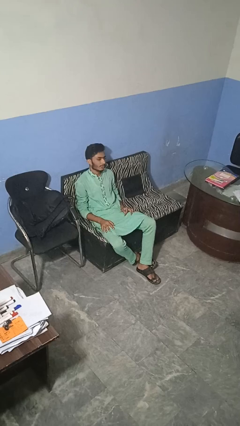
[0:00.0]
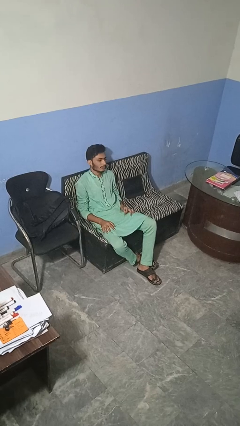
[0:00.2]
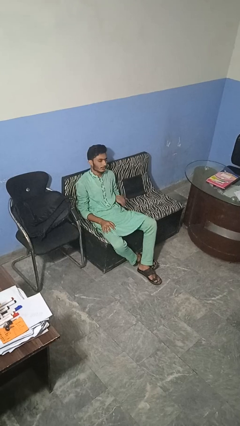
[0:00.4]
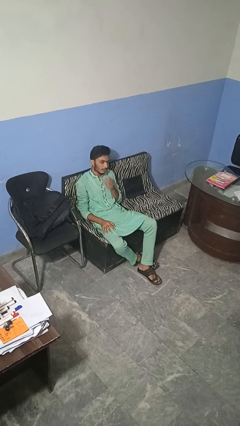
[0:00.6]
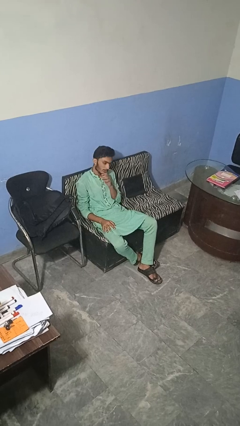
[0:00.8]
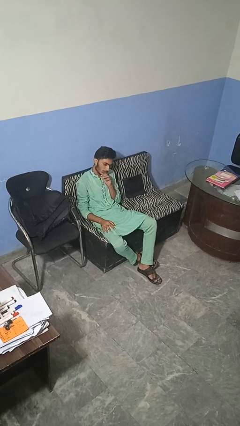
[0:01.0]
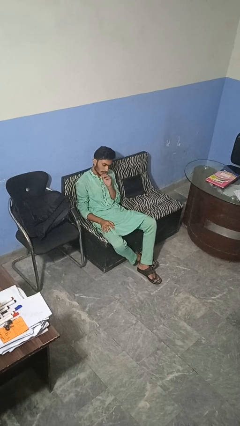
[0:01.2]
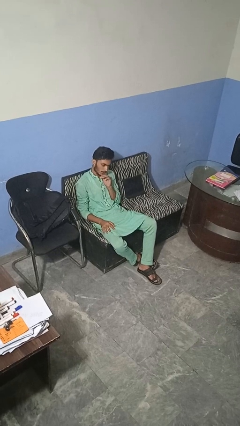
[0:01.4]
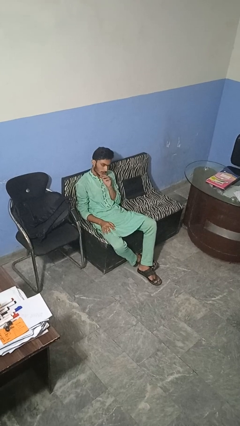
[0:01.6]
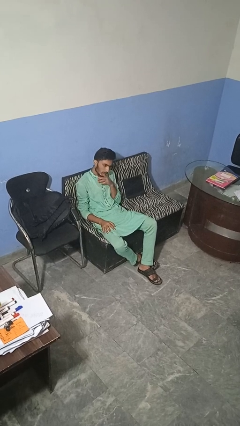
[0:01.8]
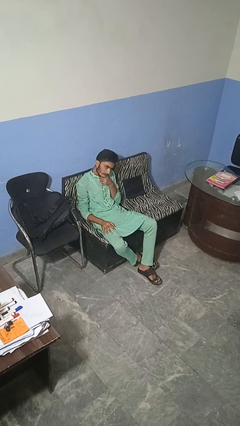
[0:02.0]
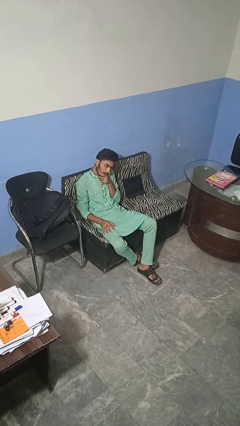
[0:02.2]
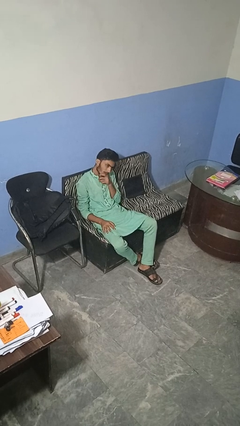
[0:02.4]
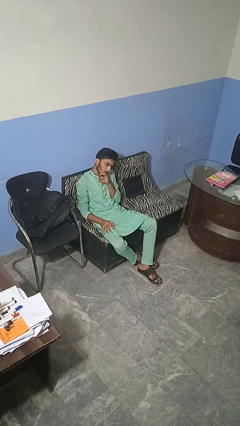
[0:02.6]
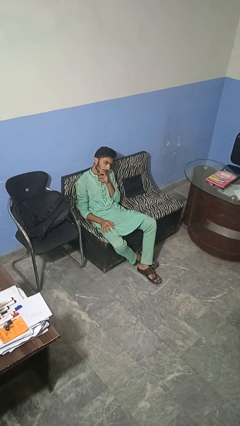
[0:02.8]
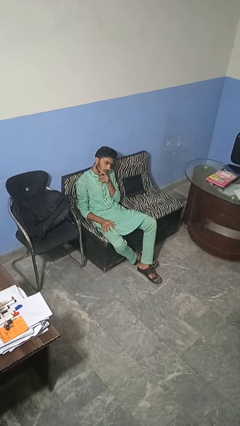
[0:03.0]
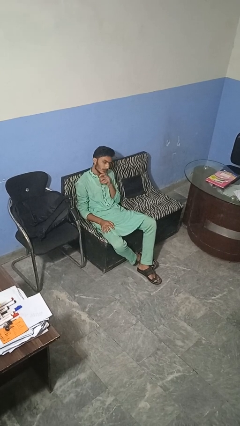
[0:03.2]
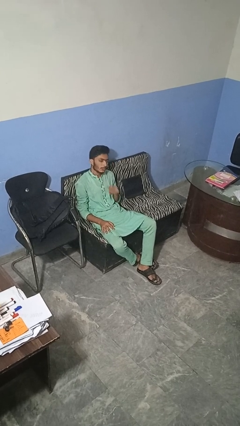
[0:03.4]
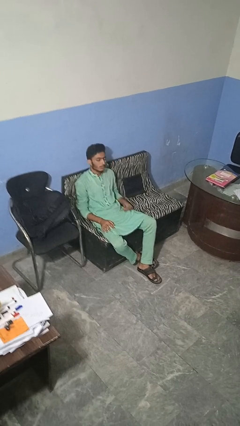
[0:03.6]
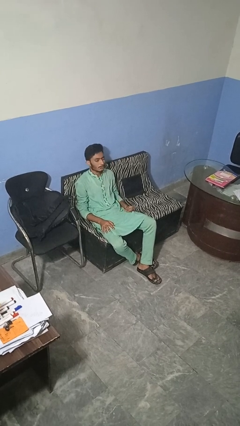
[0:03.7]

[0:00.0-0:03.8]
person strokes chin

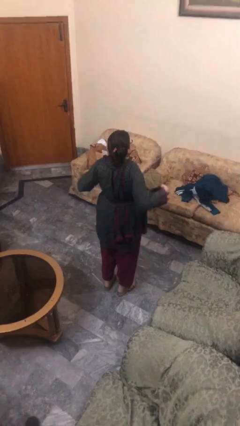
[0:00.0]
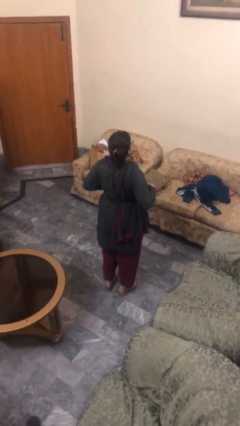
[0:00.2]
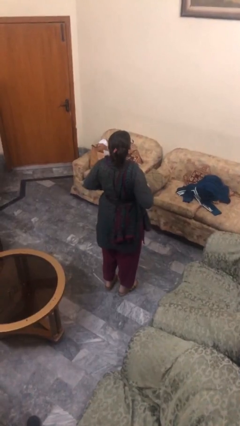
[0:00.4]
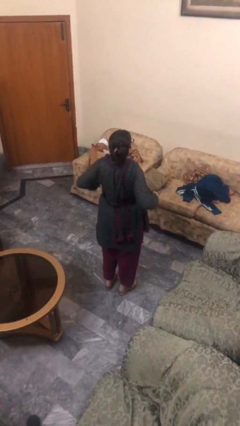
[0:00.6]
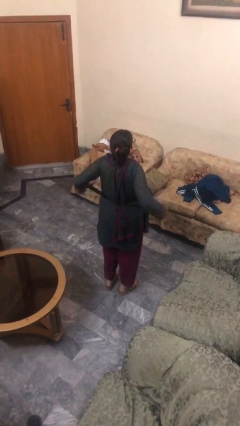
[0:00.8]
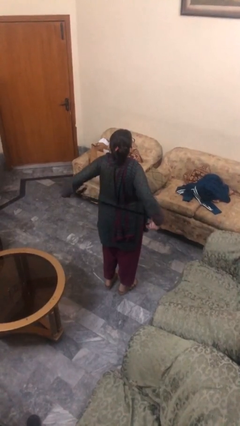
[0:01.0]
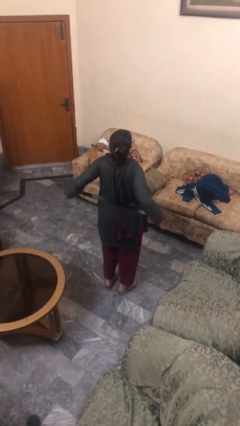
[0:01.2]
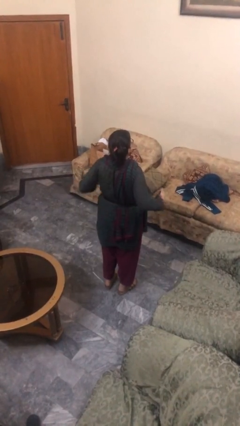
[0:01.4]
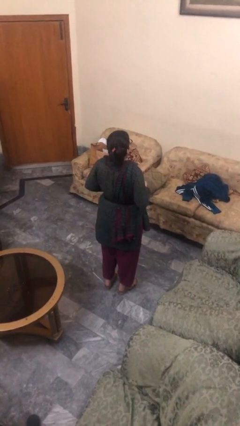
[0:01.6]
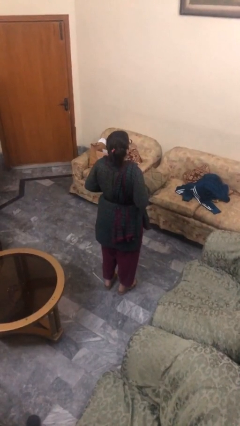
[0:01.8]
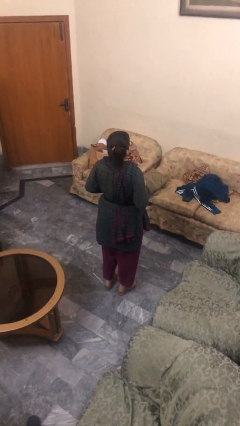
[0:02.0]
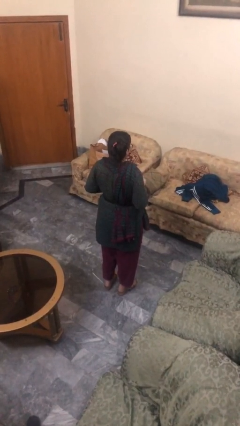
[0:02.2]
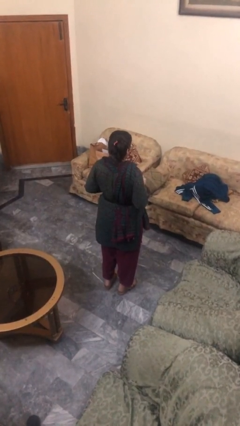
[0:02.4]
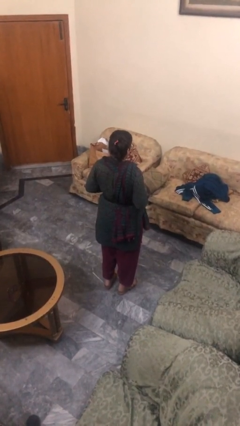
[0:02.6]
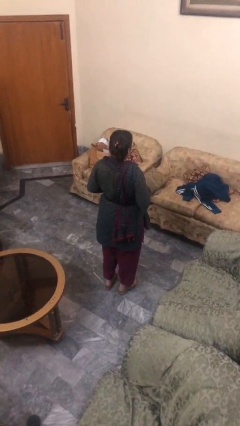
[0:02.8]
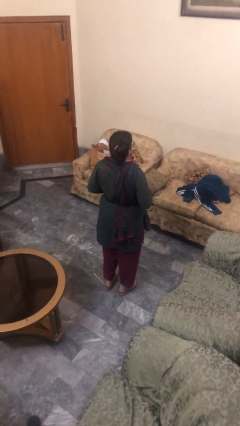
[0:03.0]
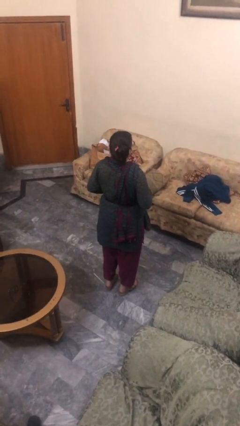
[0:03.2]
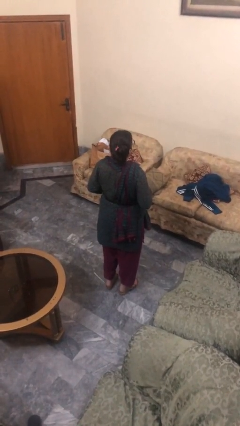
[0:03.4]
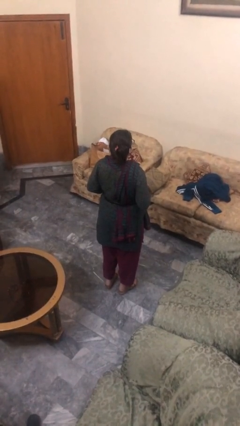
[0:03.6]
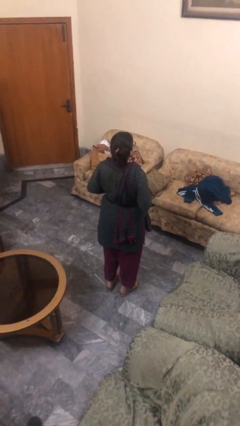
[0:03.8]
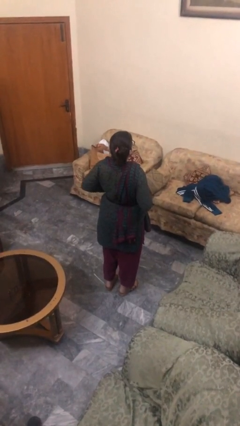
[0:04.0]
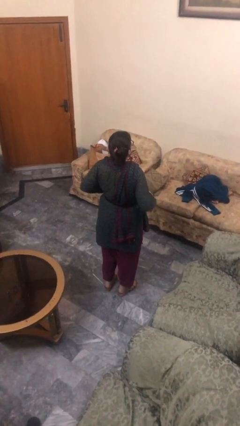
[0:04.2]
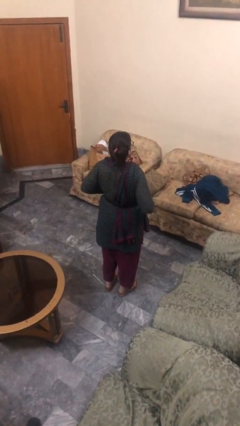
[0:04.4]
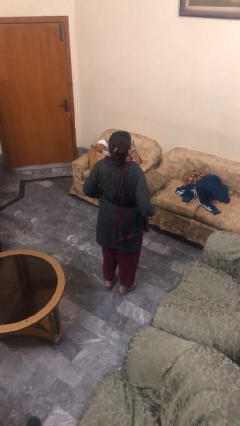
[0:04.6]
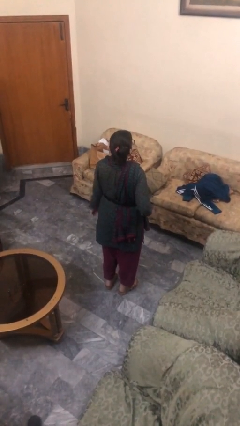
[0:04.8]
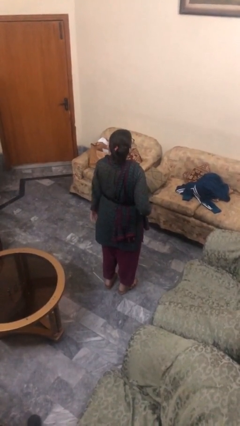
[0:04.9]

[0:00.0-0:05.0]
person puts on belt

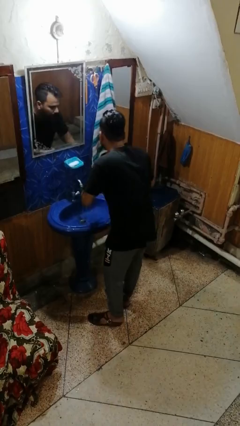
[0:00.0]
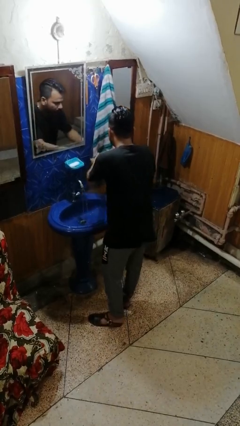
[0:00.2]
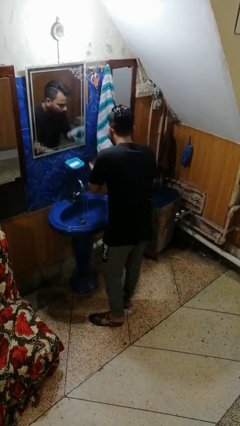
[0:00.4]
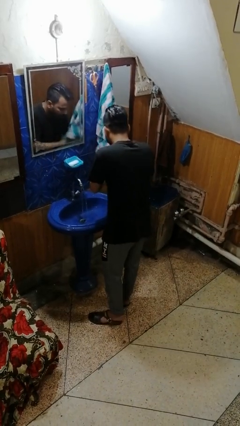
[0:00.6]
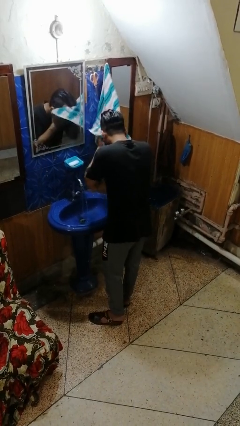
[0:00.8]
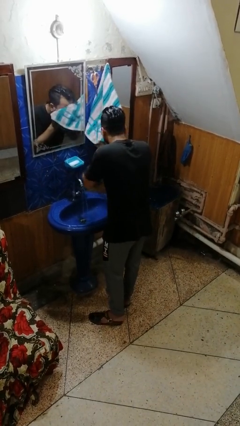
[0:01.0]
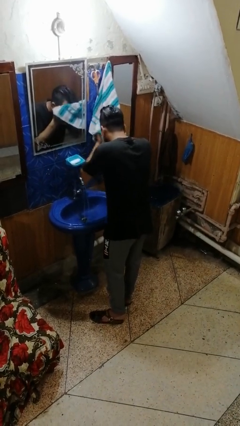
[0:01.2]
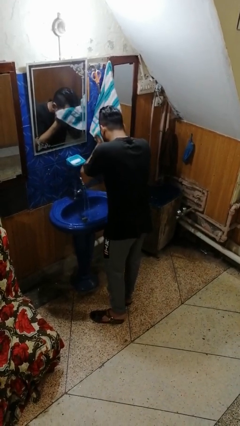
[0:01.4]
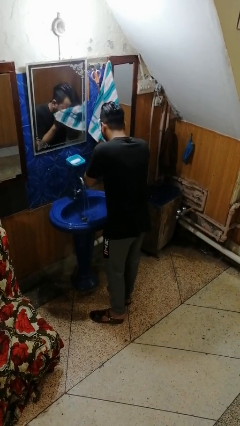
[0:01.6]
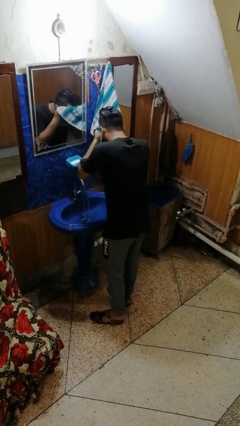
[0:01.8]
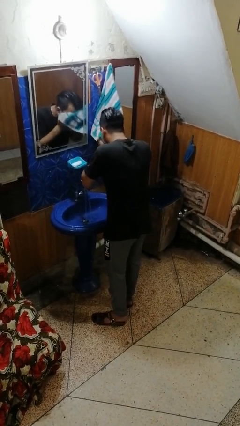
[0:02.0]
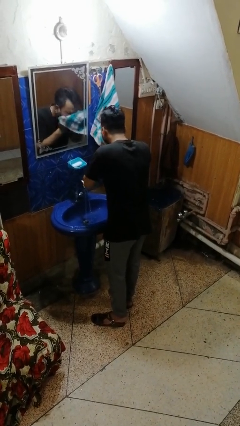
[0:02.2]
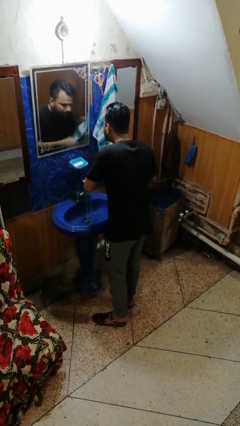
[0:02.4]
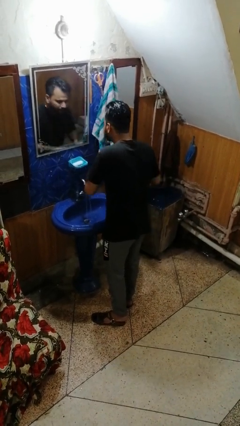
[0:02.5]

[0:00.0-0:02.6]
person dries face with towel

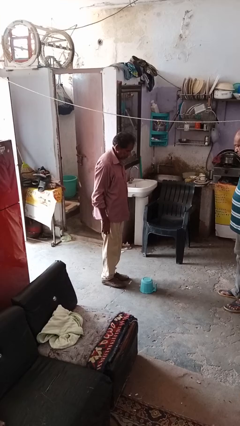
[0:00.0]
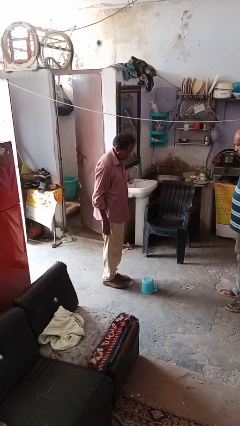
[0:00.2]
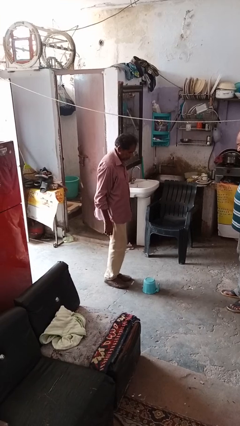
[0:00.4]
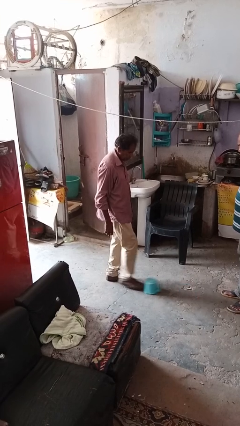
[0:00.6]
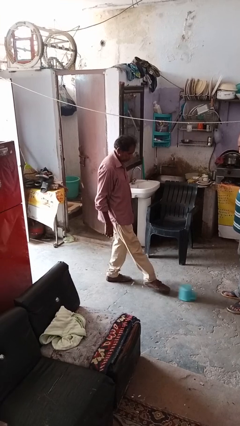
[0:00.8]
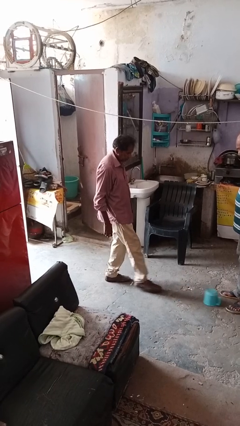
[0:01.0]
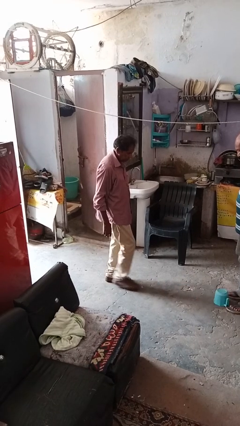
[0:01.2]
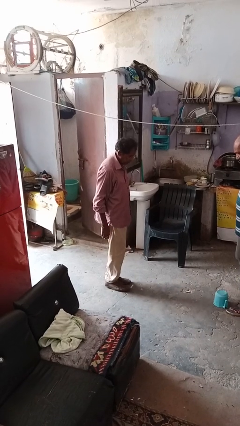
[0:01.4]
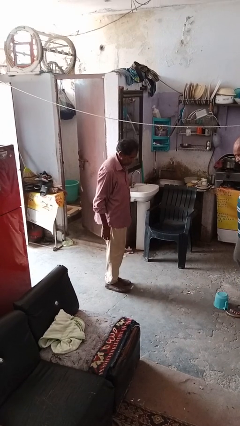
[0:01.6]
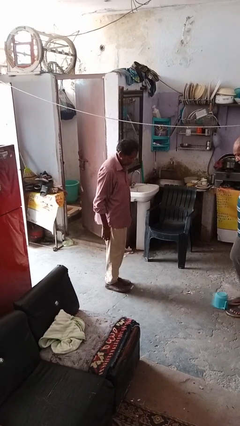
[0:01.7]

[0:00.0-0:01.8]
person kicks object to person

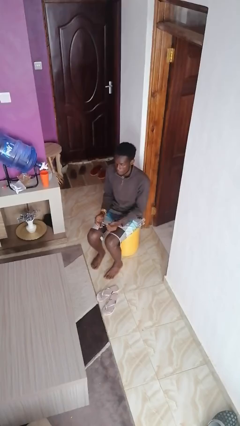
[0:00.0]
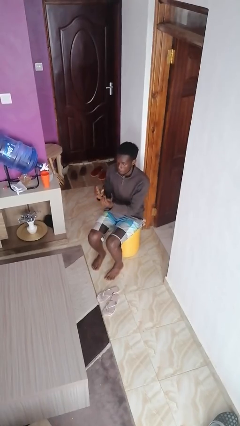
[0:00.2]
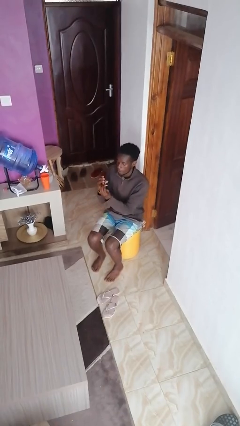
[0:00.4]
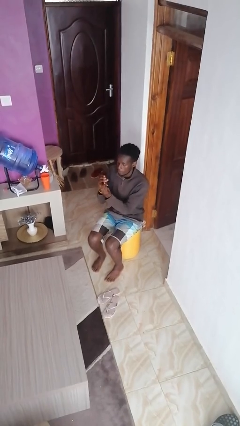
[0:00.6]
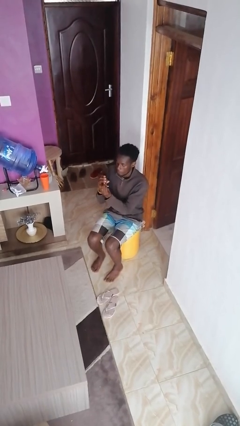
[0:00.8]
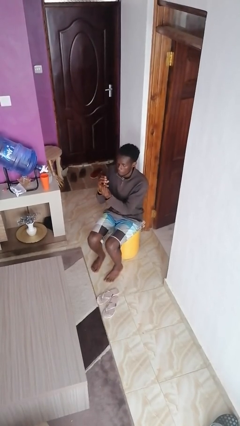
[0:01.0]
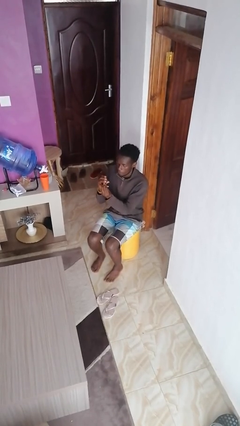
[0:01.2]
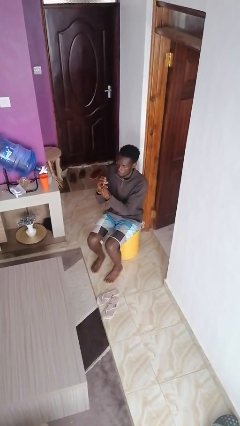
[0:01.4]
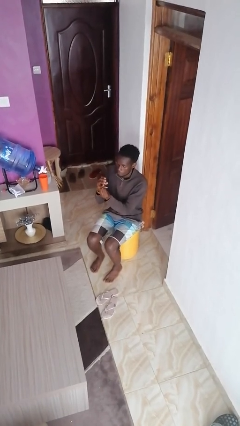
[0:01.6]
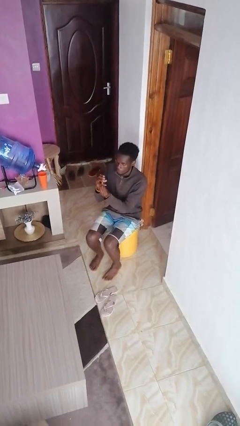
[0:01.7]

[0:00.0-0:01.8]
person clips fingernails

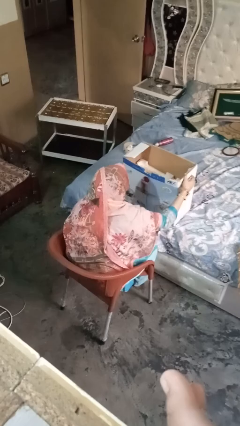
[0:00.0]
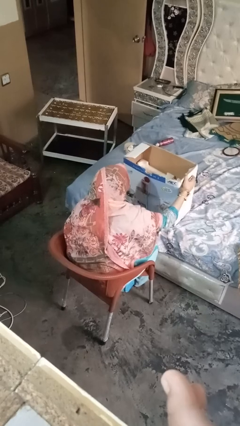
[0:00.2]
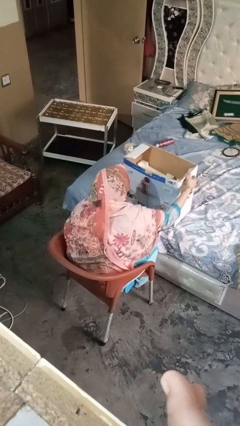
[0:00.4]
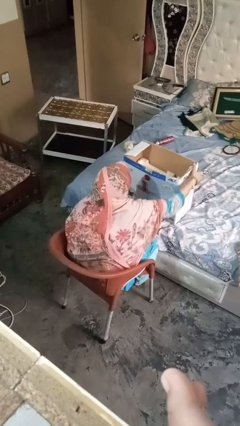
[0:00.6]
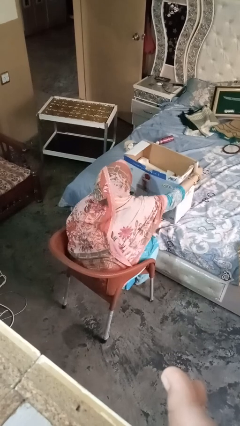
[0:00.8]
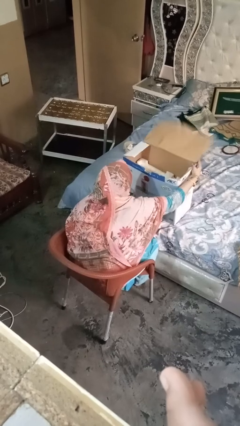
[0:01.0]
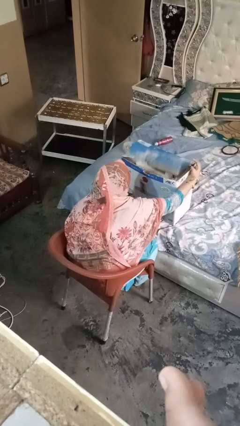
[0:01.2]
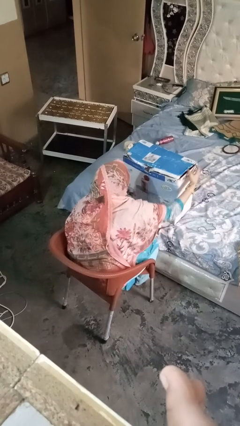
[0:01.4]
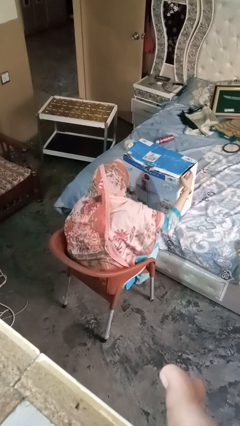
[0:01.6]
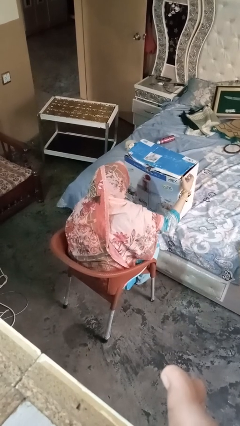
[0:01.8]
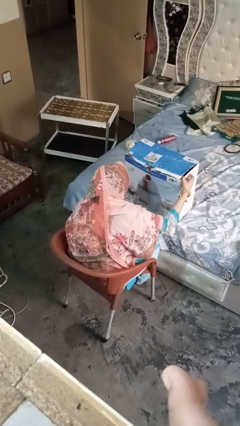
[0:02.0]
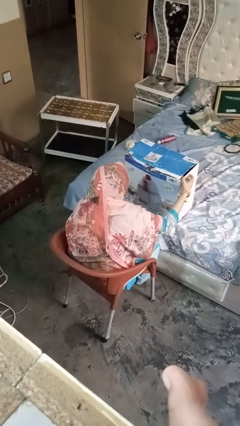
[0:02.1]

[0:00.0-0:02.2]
person closes box

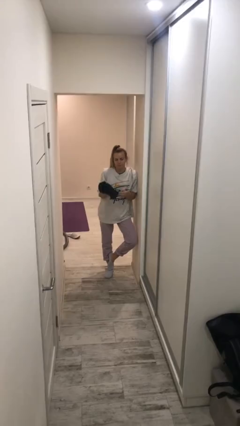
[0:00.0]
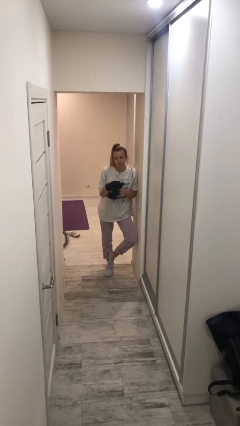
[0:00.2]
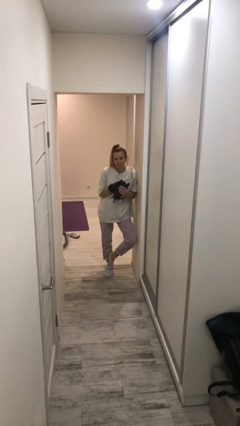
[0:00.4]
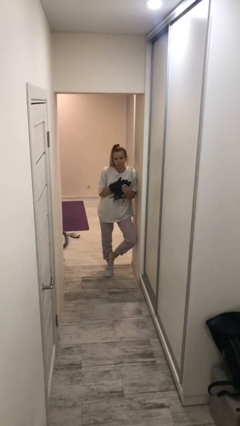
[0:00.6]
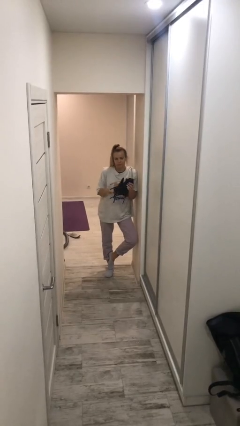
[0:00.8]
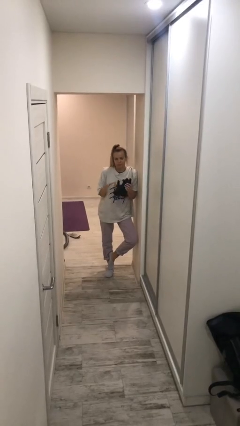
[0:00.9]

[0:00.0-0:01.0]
person takes off gloves
